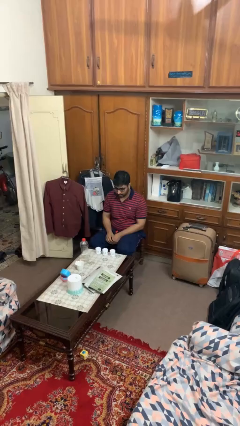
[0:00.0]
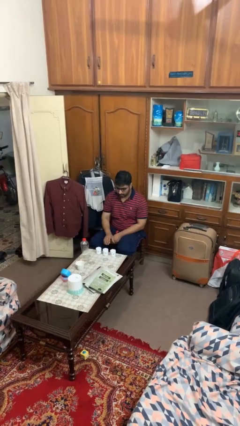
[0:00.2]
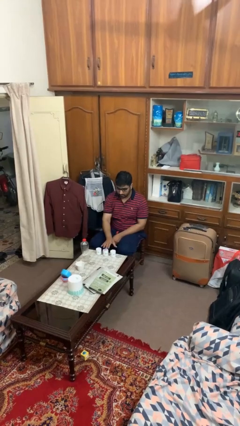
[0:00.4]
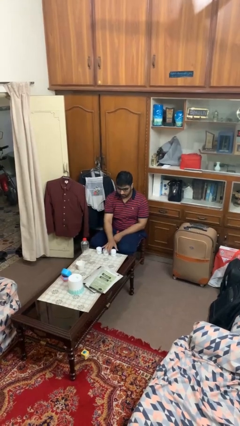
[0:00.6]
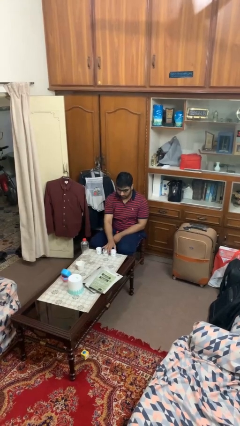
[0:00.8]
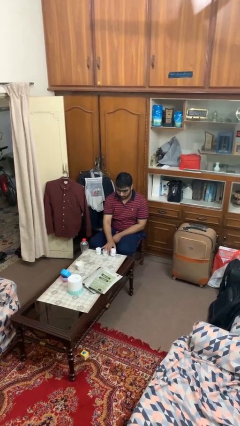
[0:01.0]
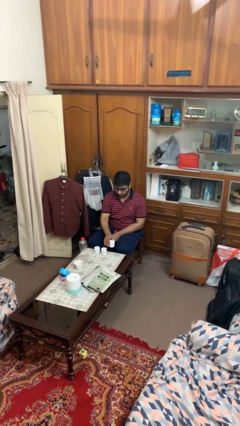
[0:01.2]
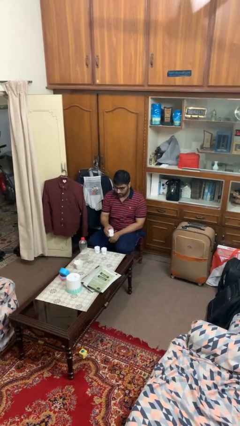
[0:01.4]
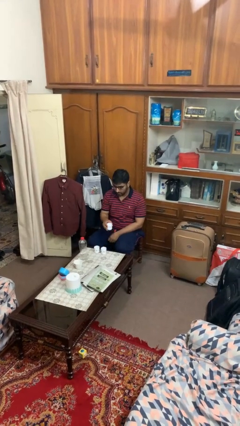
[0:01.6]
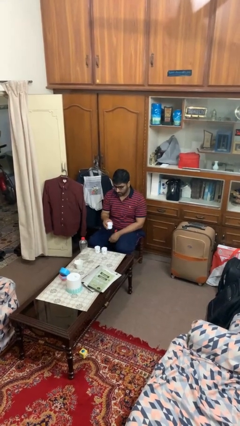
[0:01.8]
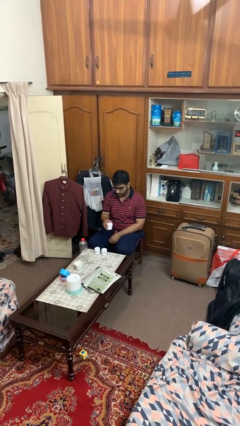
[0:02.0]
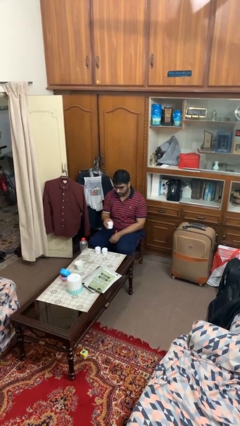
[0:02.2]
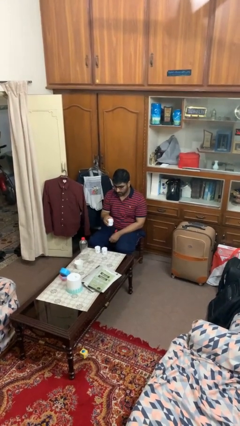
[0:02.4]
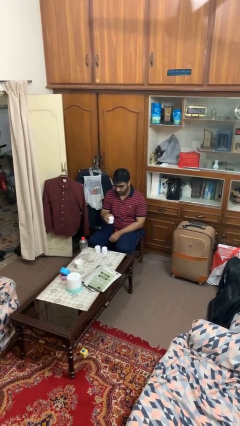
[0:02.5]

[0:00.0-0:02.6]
person picks up object from table

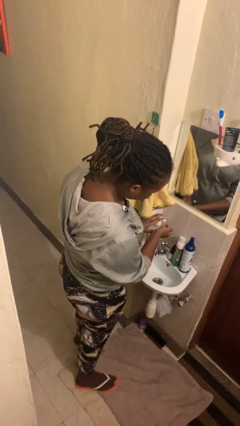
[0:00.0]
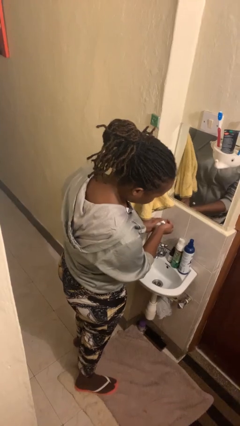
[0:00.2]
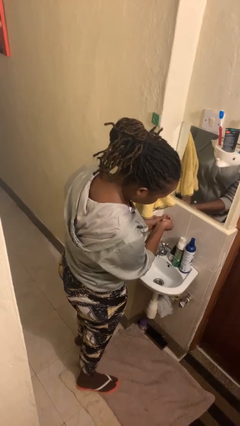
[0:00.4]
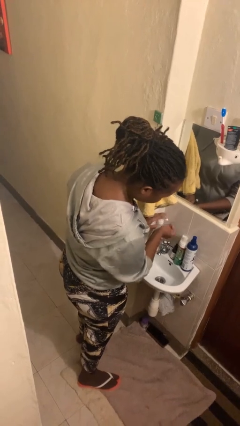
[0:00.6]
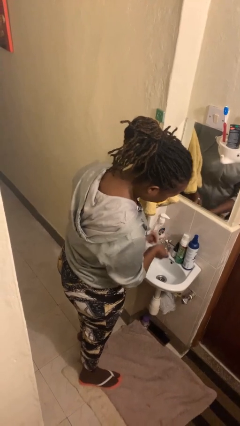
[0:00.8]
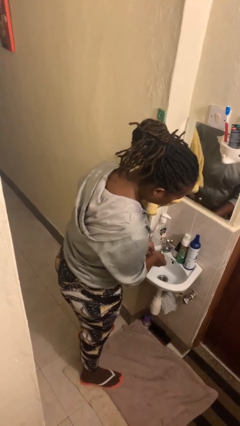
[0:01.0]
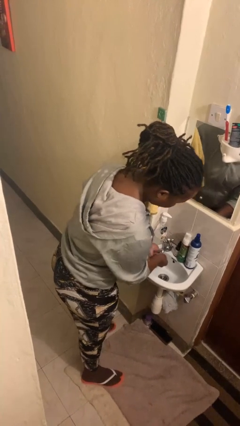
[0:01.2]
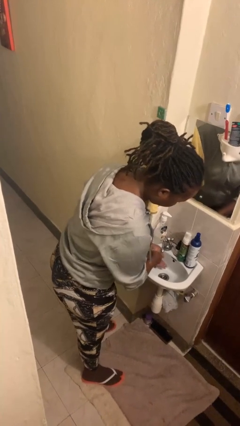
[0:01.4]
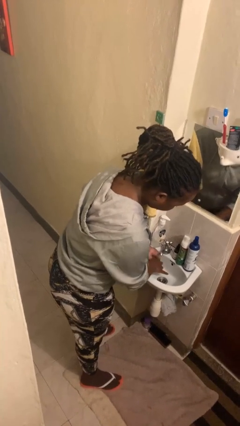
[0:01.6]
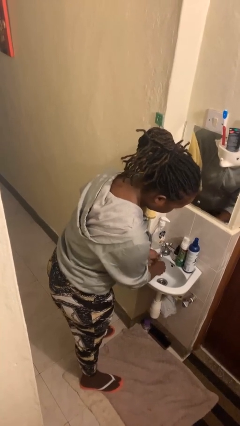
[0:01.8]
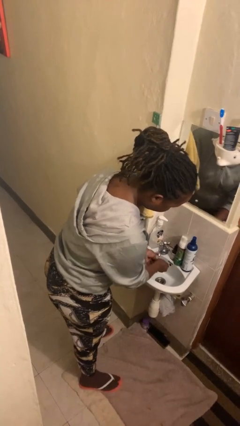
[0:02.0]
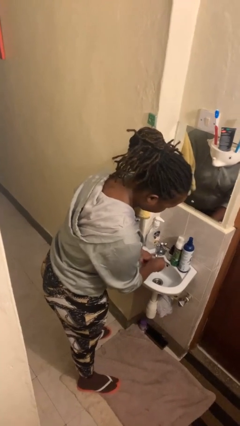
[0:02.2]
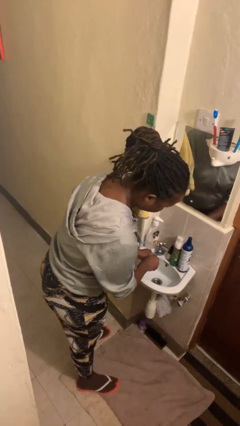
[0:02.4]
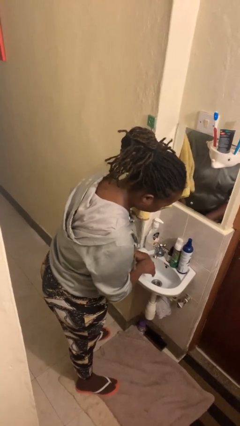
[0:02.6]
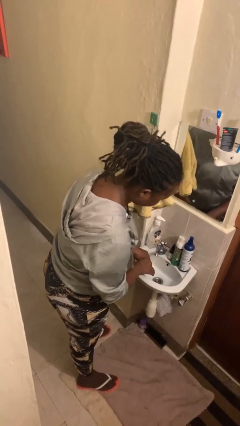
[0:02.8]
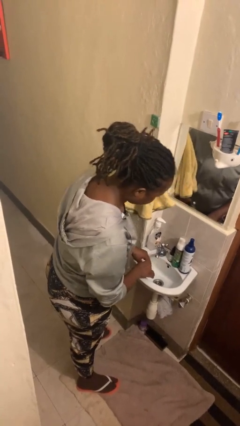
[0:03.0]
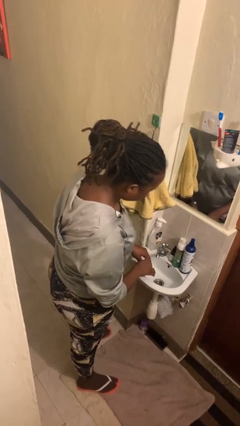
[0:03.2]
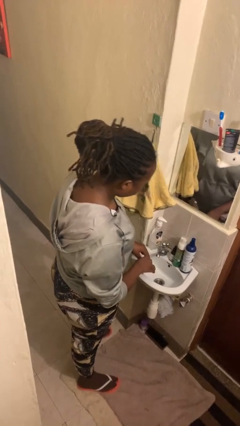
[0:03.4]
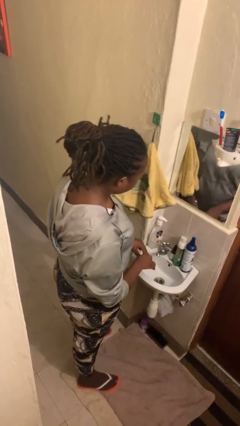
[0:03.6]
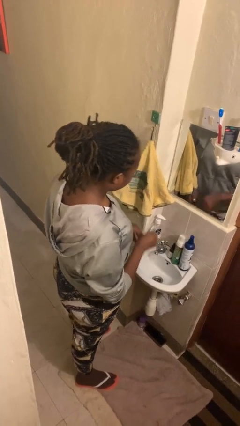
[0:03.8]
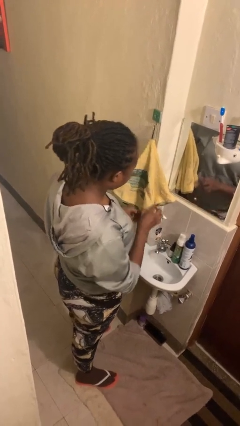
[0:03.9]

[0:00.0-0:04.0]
person washes hands

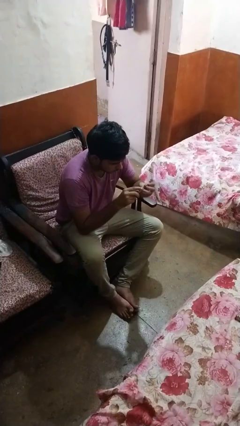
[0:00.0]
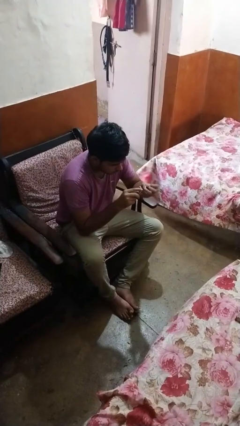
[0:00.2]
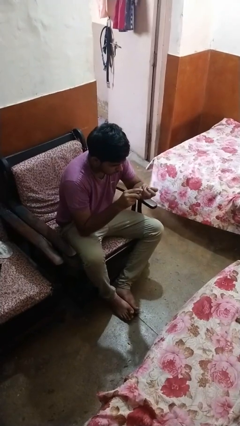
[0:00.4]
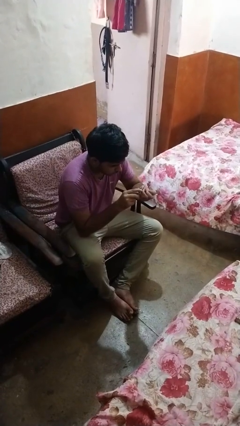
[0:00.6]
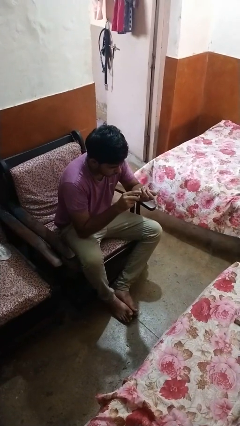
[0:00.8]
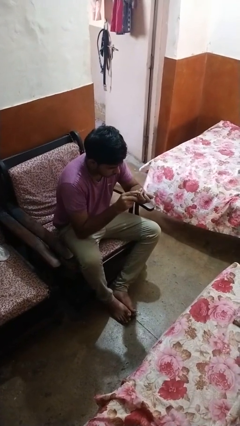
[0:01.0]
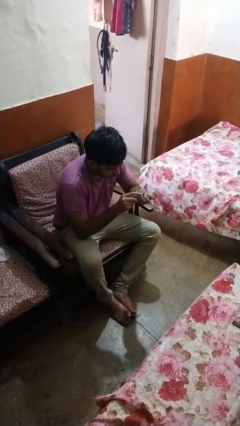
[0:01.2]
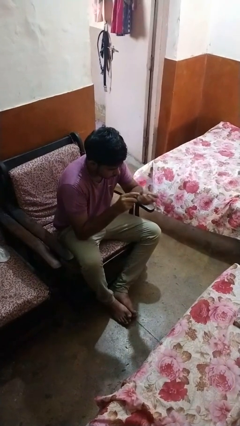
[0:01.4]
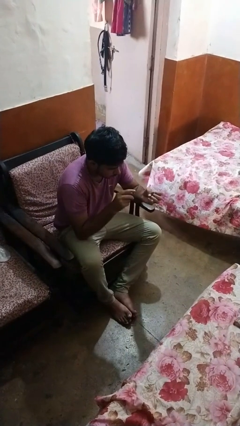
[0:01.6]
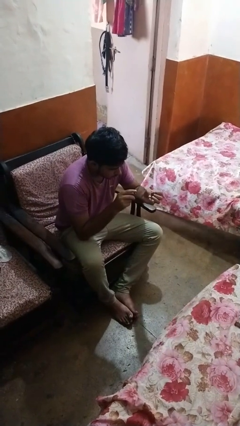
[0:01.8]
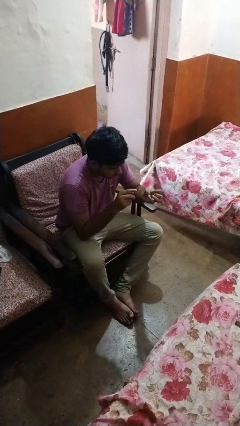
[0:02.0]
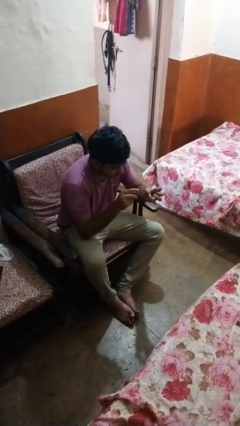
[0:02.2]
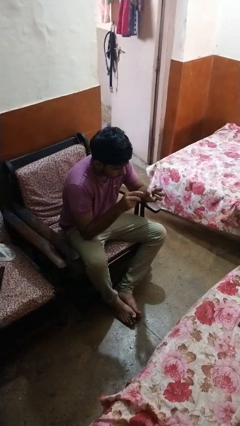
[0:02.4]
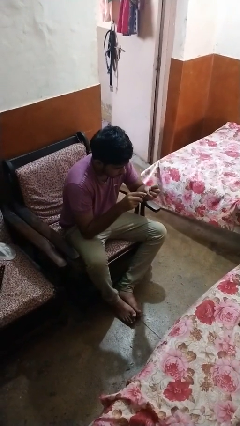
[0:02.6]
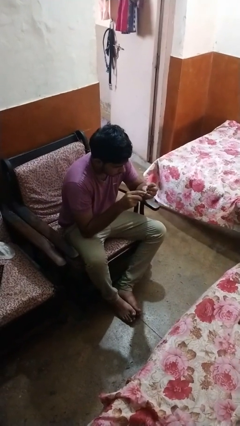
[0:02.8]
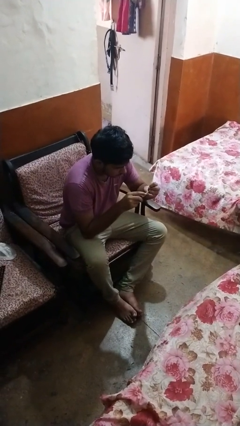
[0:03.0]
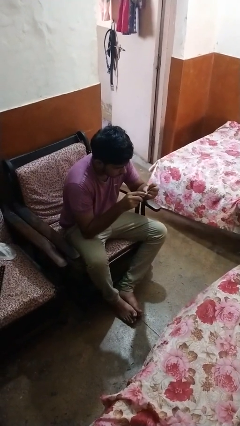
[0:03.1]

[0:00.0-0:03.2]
person files fingernails

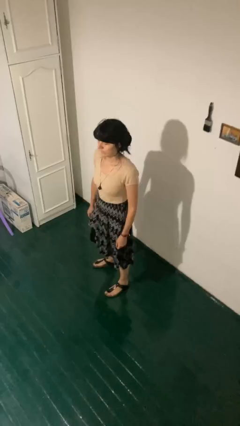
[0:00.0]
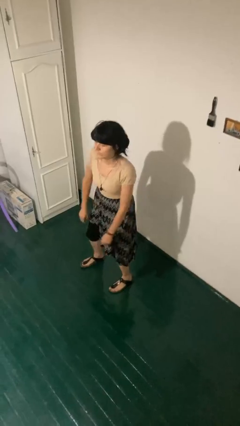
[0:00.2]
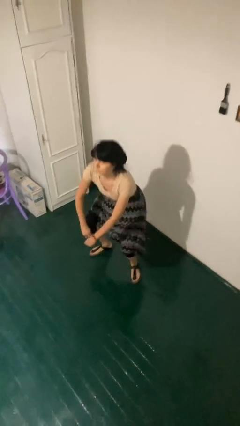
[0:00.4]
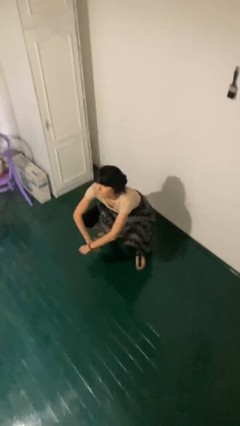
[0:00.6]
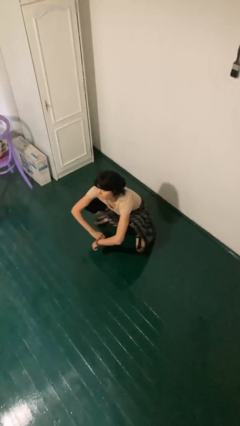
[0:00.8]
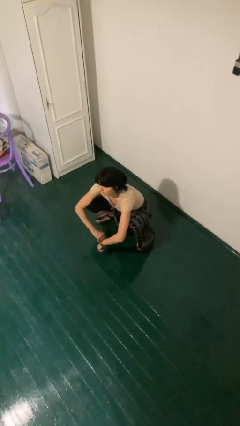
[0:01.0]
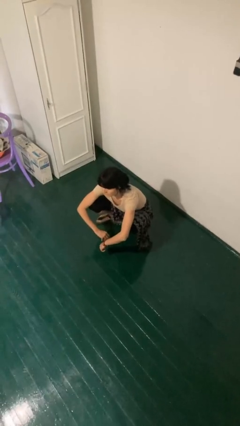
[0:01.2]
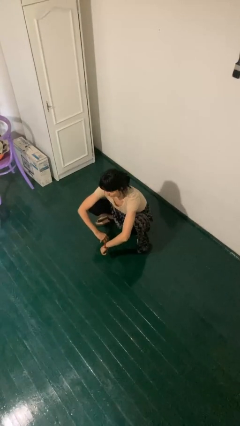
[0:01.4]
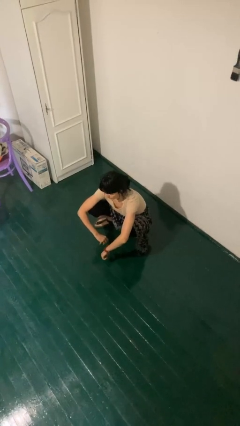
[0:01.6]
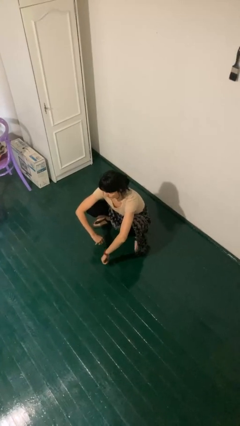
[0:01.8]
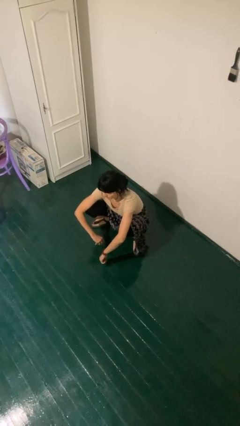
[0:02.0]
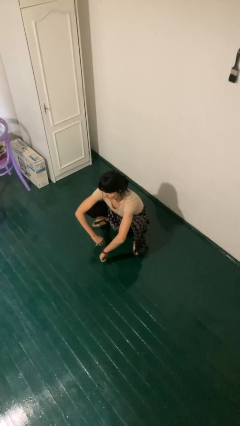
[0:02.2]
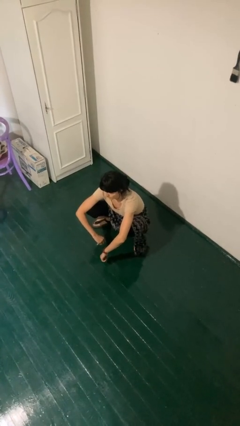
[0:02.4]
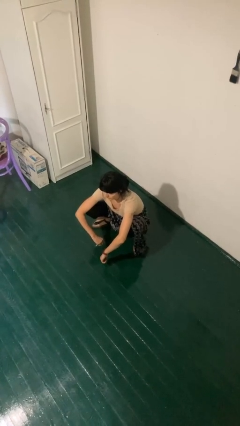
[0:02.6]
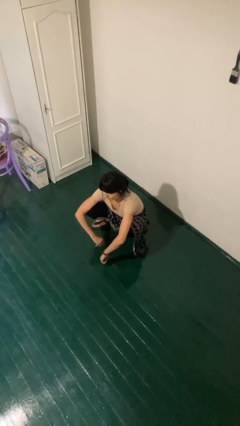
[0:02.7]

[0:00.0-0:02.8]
person squats

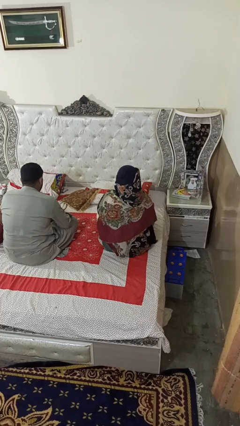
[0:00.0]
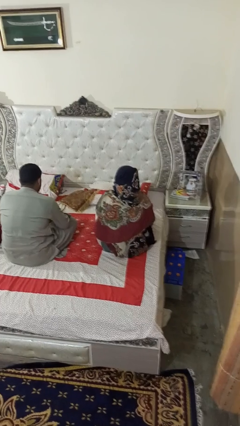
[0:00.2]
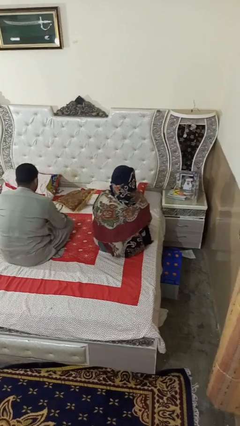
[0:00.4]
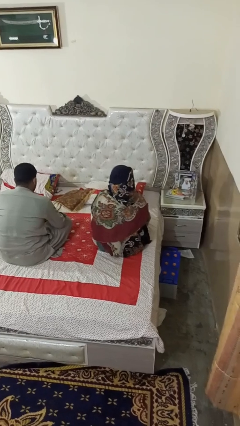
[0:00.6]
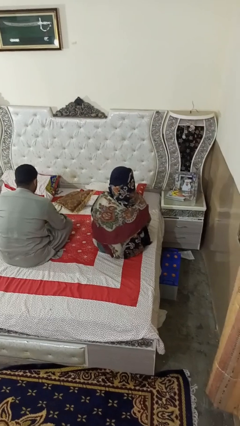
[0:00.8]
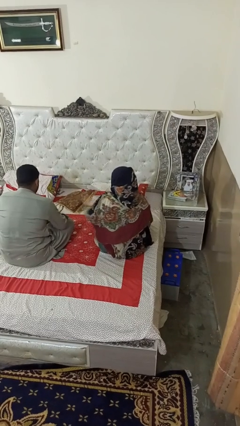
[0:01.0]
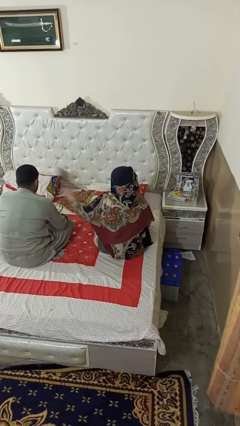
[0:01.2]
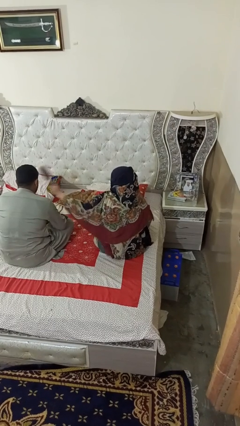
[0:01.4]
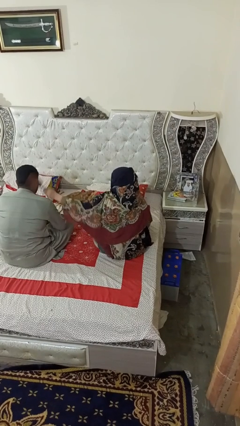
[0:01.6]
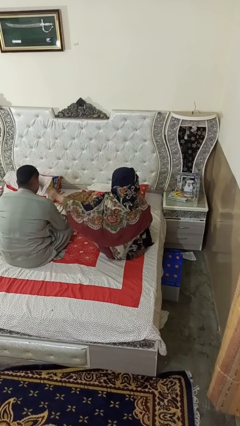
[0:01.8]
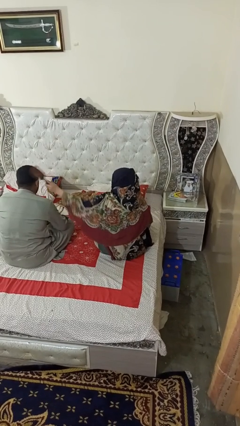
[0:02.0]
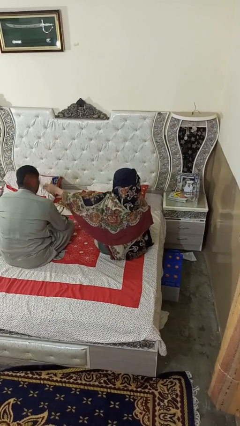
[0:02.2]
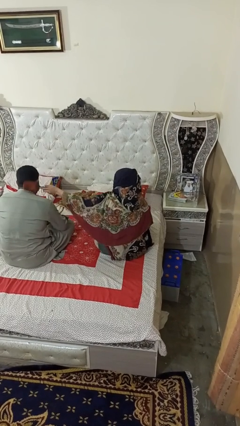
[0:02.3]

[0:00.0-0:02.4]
person brushes hair of person

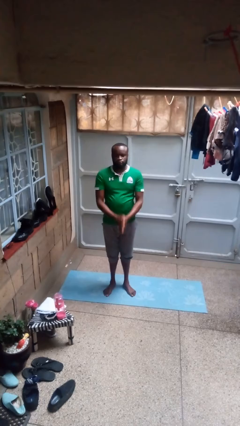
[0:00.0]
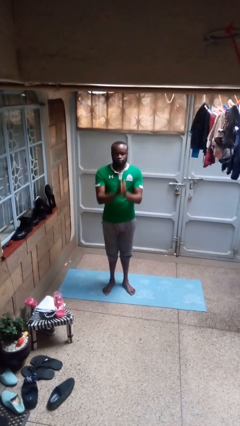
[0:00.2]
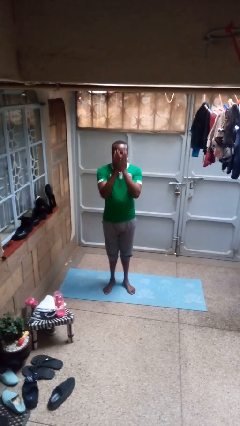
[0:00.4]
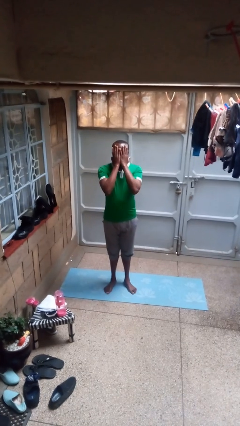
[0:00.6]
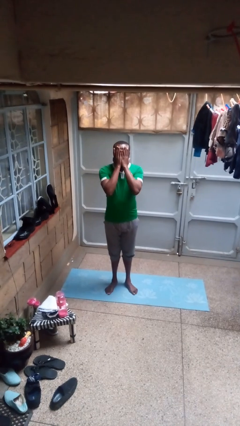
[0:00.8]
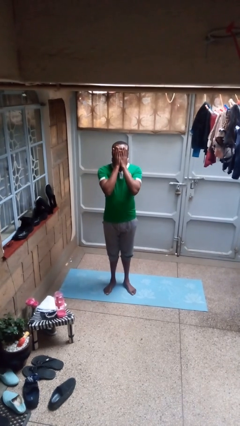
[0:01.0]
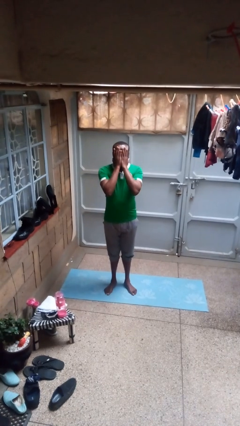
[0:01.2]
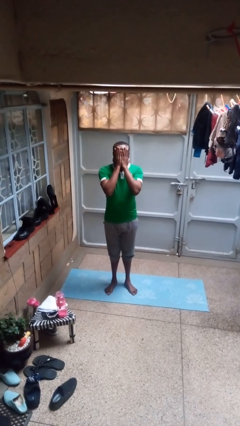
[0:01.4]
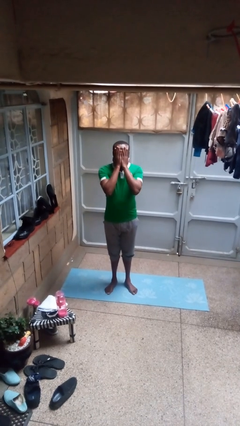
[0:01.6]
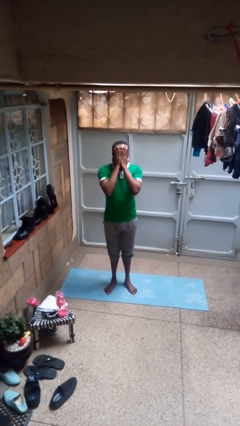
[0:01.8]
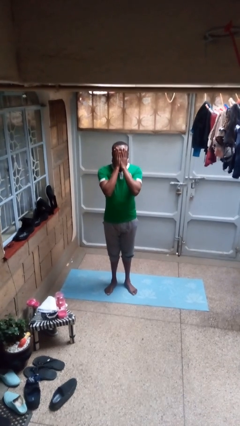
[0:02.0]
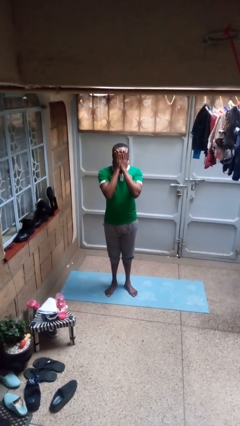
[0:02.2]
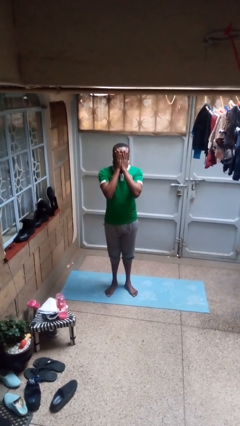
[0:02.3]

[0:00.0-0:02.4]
person covers face with hands
